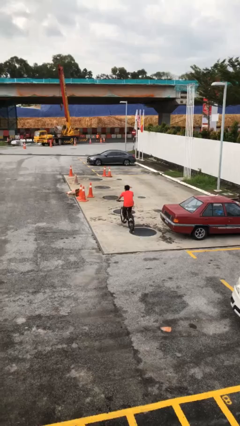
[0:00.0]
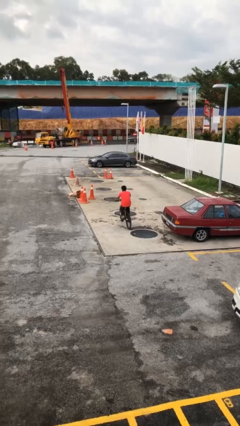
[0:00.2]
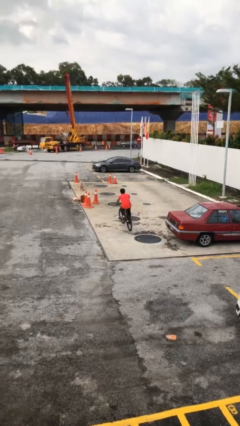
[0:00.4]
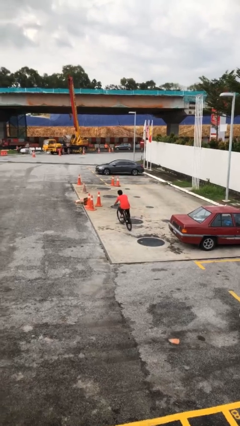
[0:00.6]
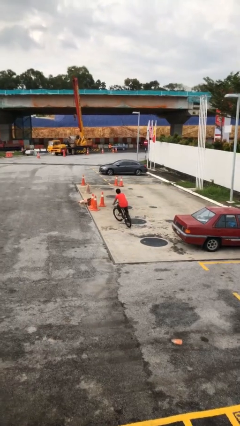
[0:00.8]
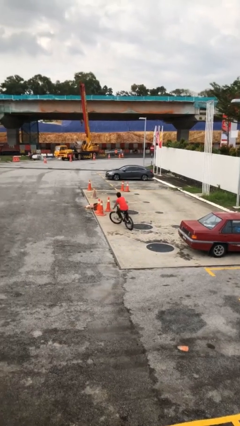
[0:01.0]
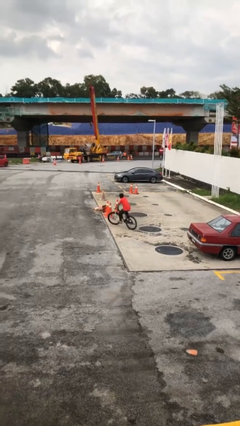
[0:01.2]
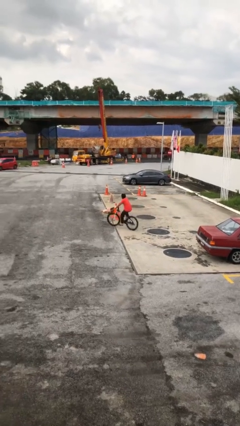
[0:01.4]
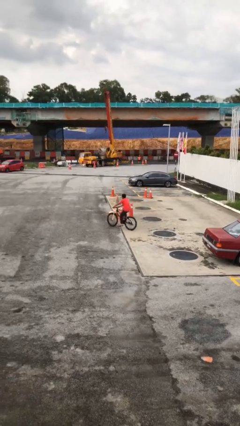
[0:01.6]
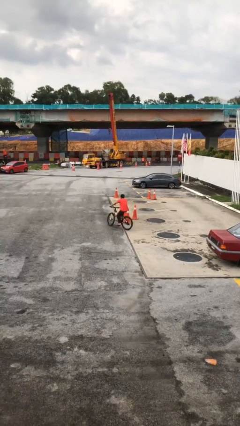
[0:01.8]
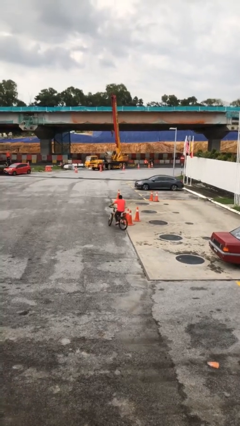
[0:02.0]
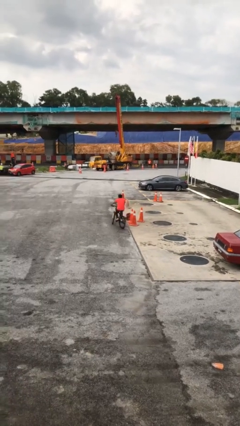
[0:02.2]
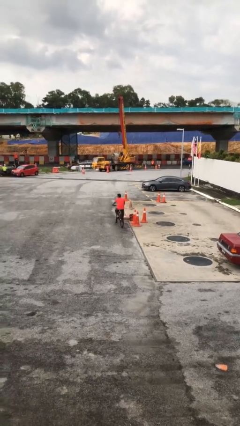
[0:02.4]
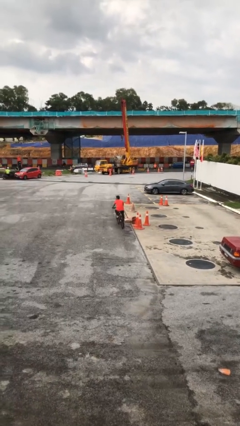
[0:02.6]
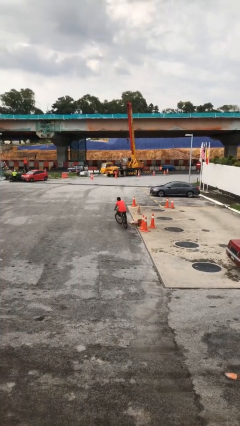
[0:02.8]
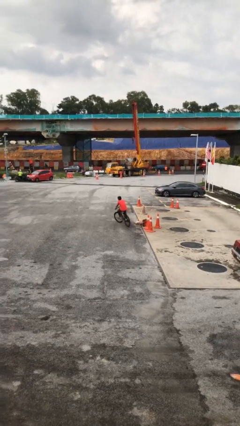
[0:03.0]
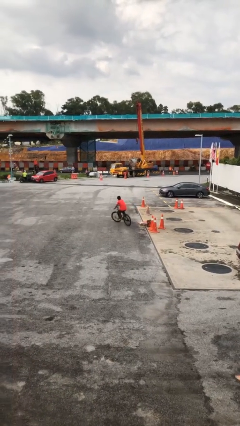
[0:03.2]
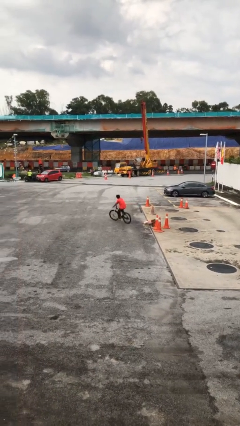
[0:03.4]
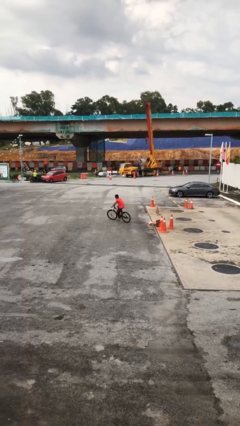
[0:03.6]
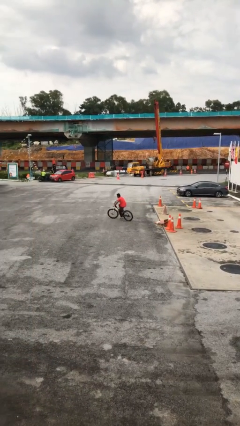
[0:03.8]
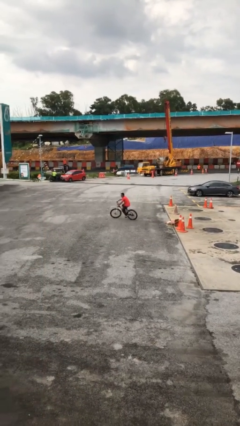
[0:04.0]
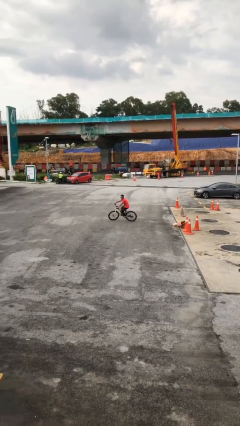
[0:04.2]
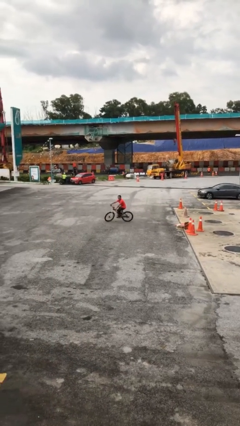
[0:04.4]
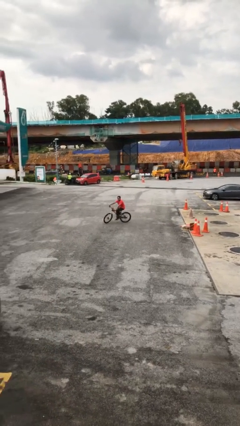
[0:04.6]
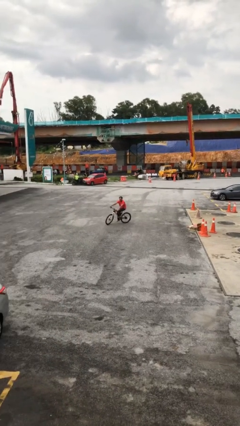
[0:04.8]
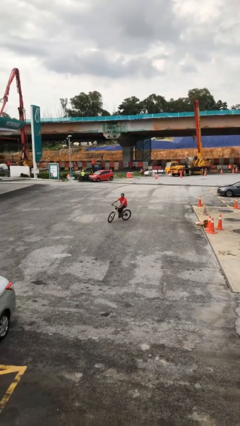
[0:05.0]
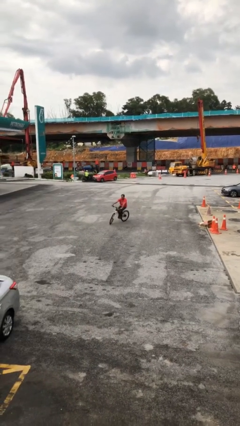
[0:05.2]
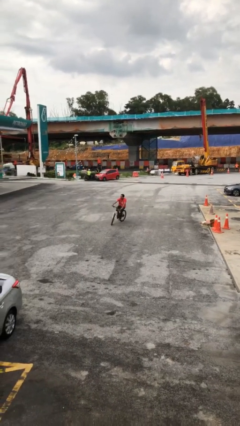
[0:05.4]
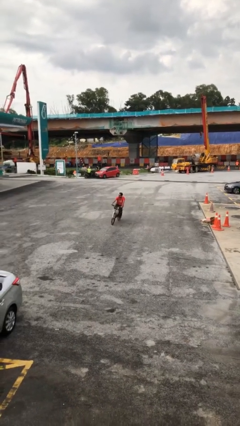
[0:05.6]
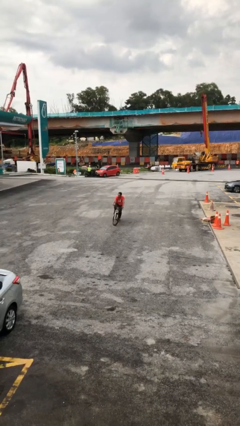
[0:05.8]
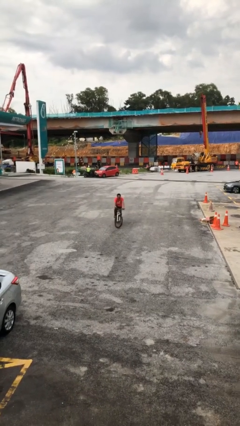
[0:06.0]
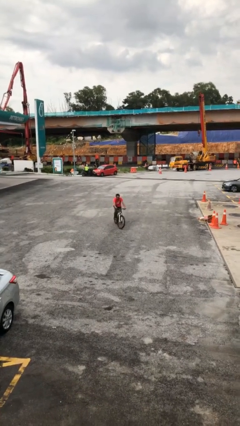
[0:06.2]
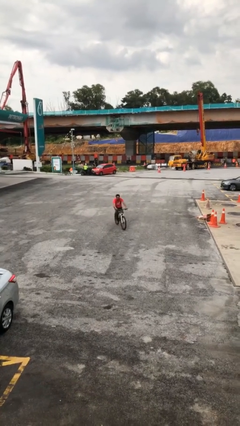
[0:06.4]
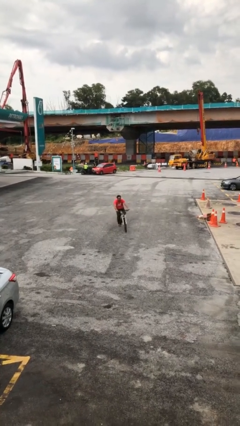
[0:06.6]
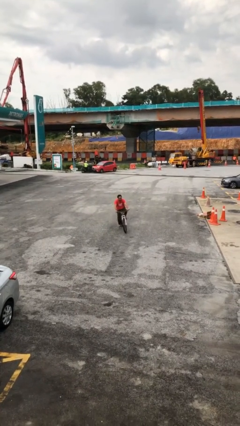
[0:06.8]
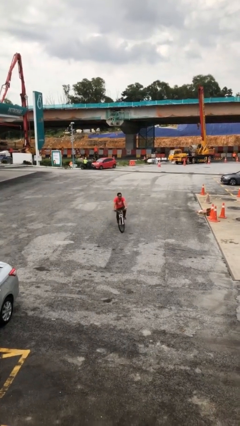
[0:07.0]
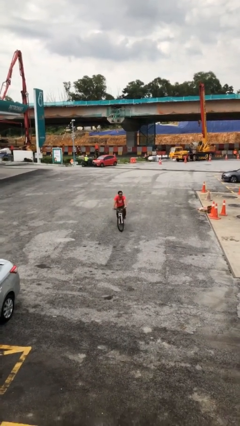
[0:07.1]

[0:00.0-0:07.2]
person rides bicycle

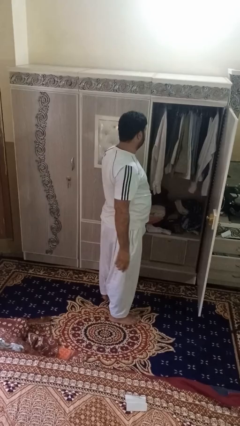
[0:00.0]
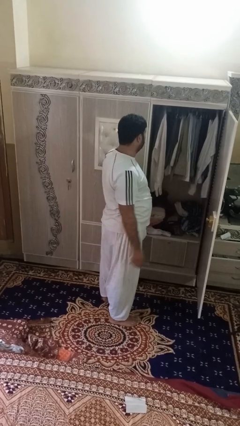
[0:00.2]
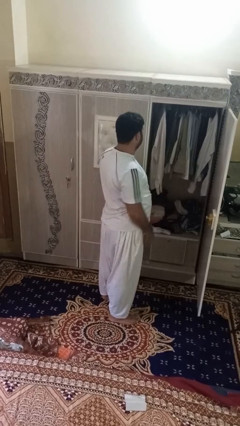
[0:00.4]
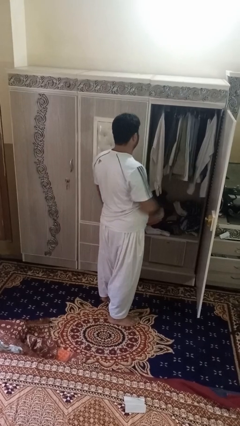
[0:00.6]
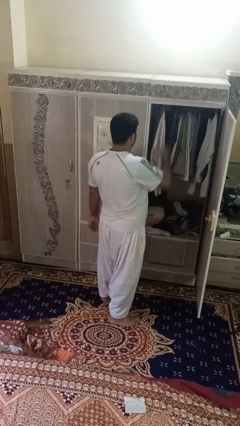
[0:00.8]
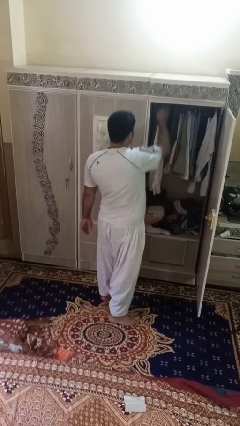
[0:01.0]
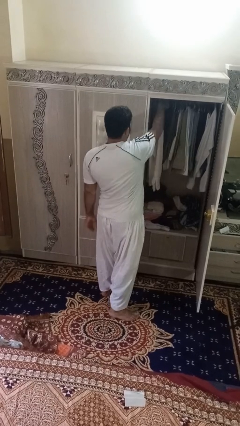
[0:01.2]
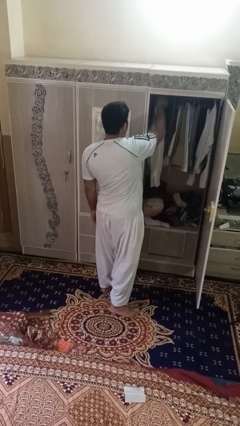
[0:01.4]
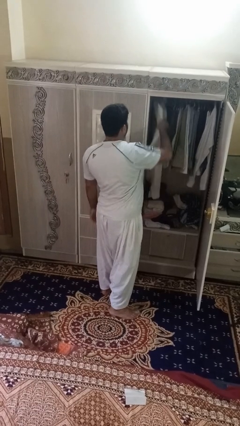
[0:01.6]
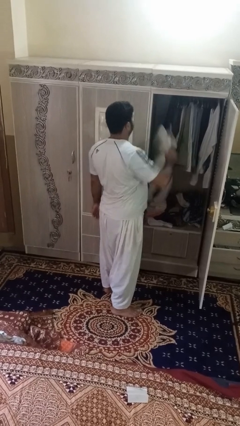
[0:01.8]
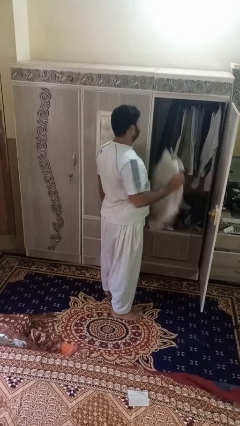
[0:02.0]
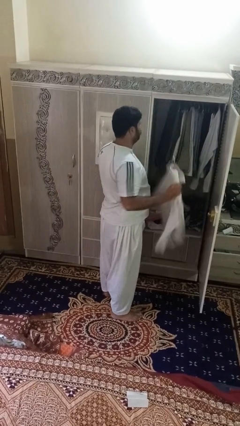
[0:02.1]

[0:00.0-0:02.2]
person takes clothes from closet

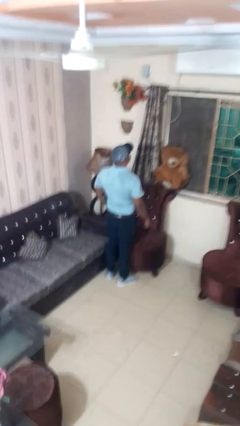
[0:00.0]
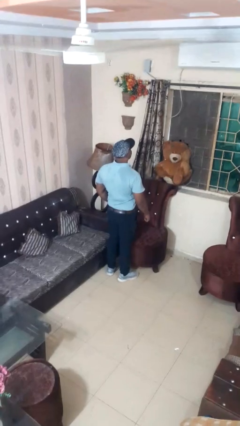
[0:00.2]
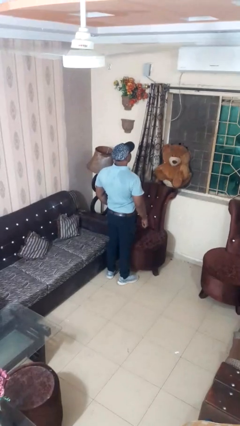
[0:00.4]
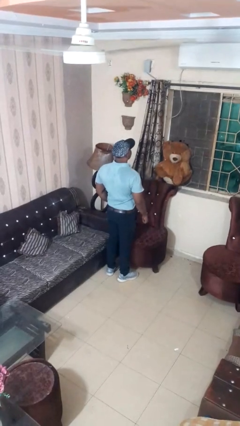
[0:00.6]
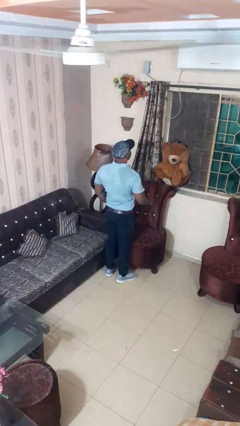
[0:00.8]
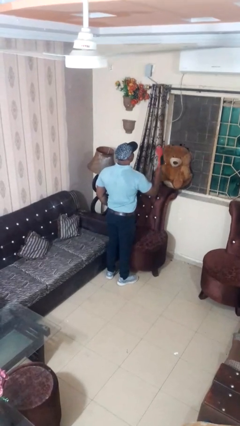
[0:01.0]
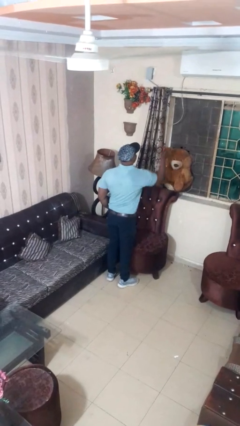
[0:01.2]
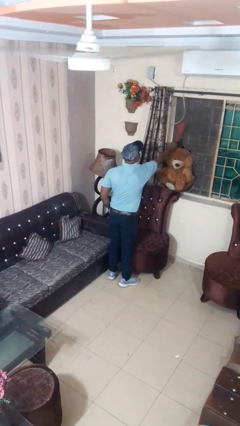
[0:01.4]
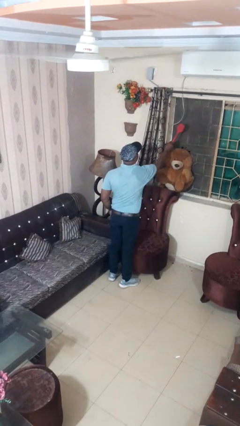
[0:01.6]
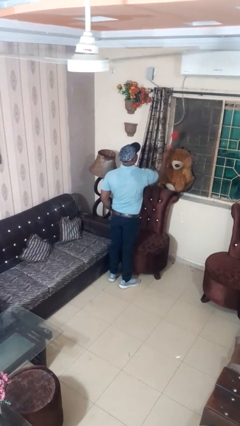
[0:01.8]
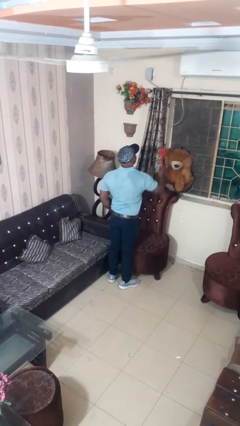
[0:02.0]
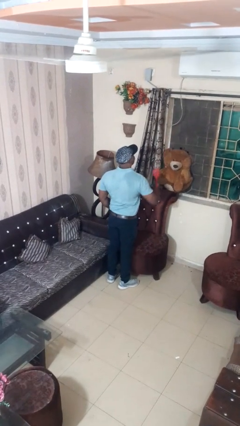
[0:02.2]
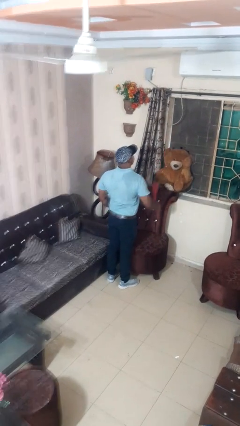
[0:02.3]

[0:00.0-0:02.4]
person swats bug

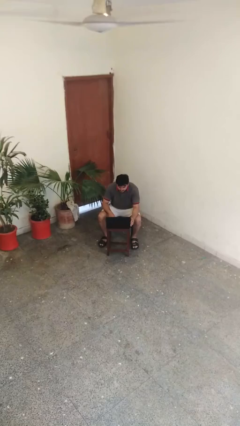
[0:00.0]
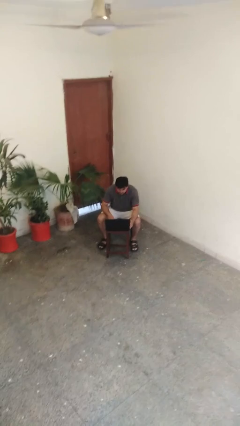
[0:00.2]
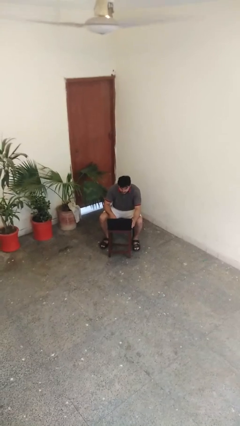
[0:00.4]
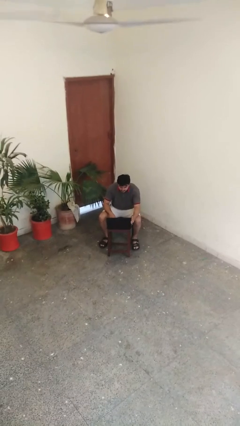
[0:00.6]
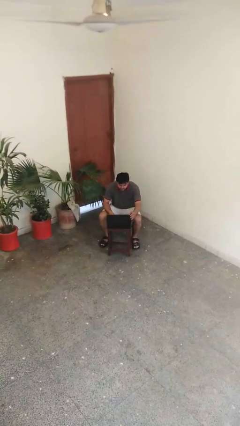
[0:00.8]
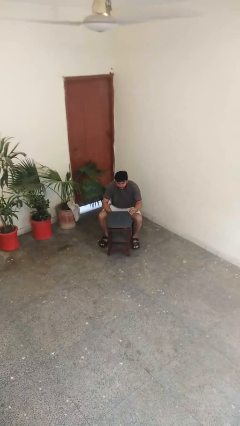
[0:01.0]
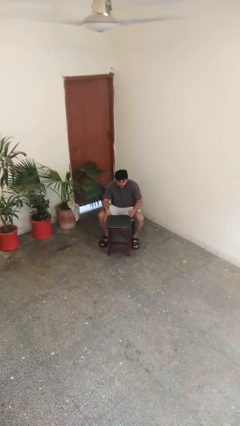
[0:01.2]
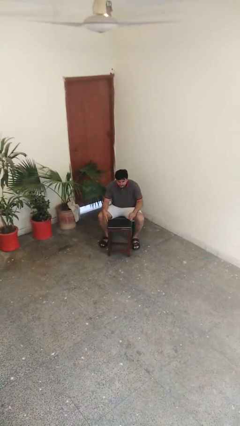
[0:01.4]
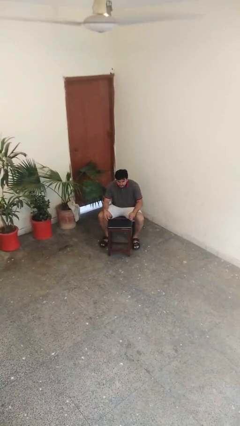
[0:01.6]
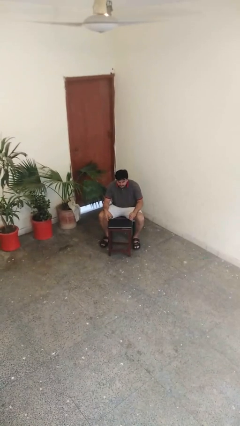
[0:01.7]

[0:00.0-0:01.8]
person closes laptop

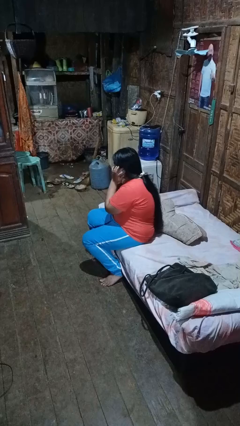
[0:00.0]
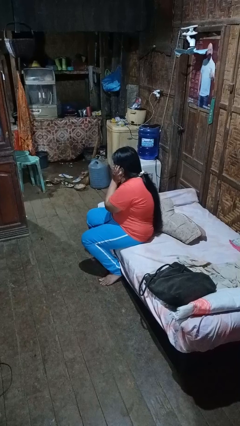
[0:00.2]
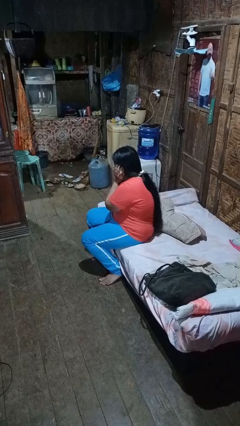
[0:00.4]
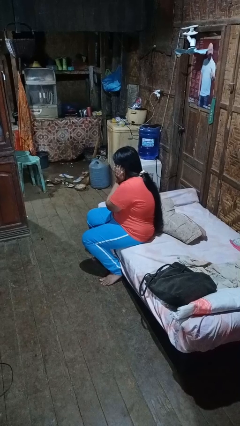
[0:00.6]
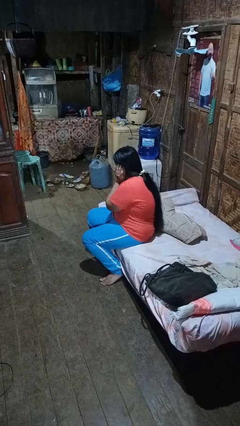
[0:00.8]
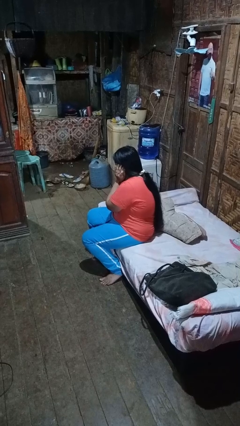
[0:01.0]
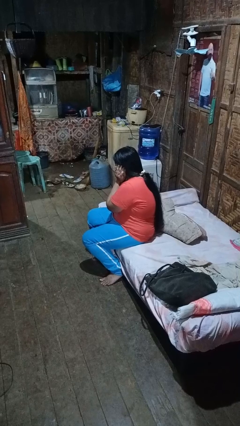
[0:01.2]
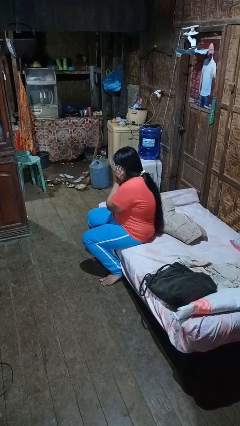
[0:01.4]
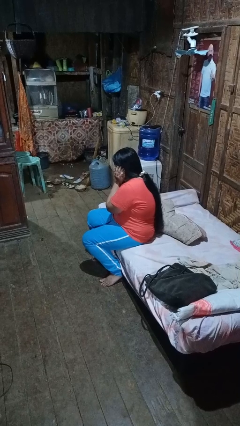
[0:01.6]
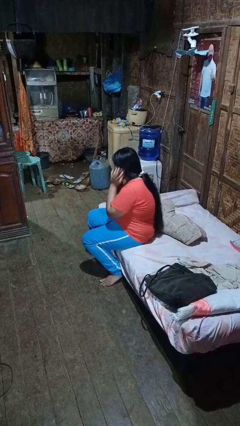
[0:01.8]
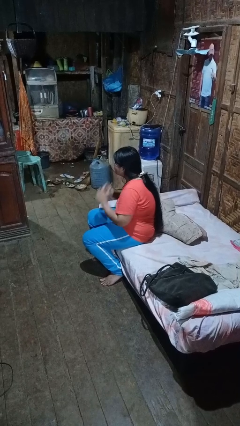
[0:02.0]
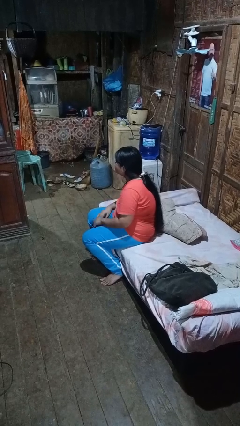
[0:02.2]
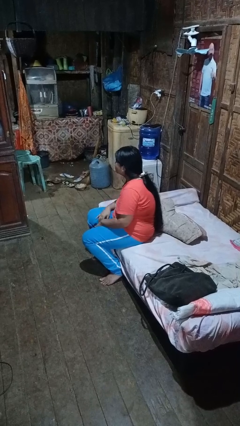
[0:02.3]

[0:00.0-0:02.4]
person puts fingers in ear

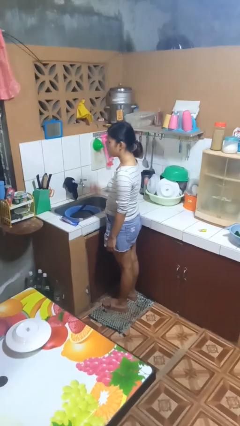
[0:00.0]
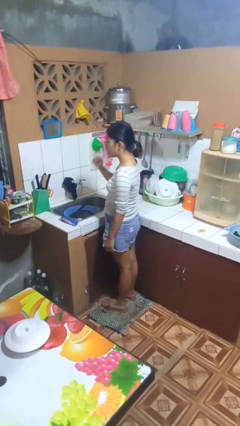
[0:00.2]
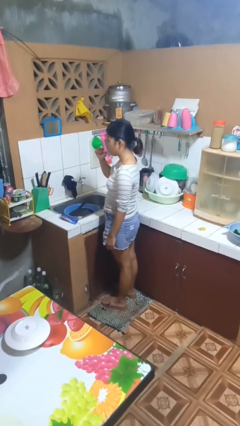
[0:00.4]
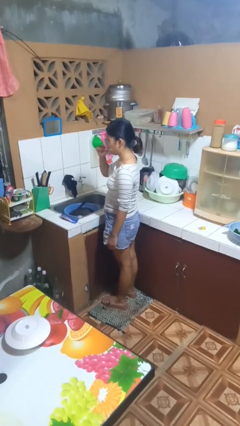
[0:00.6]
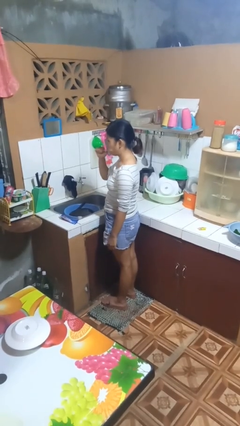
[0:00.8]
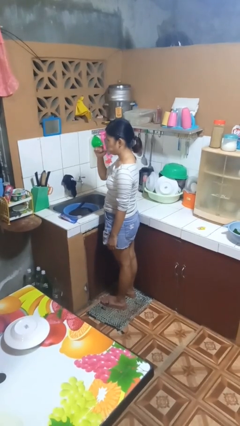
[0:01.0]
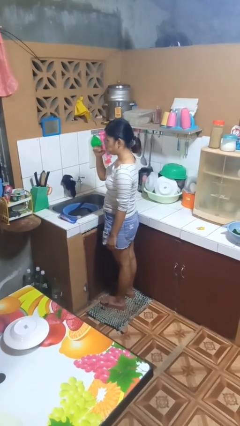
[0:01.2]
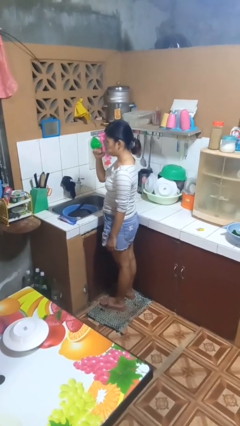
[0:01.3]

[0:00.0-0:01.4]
person brushes teeth
